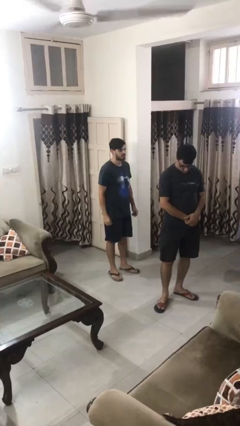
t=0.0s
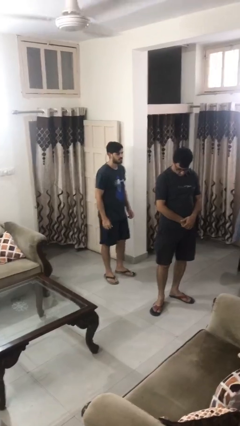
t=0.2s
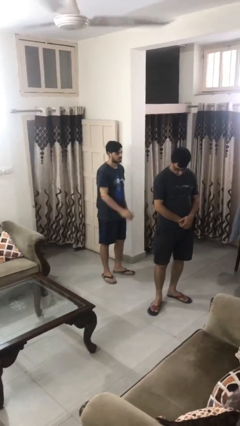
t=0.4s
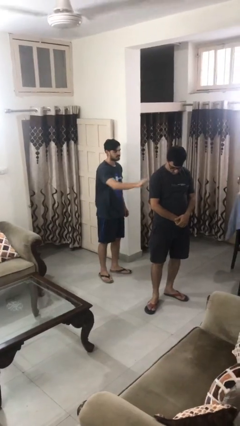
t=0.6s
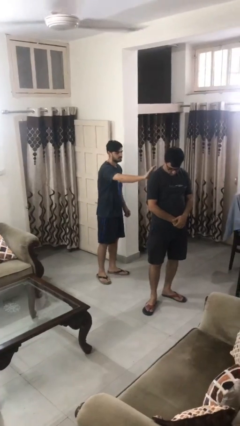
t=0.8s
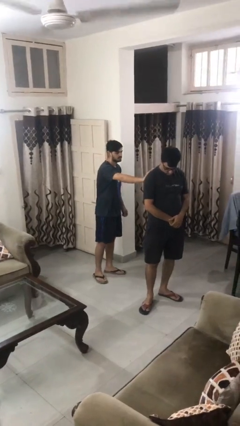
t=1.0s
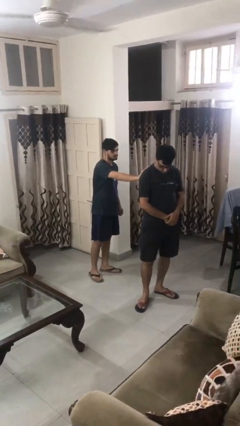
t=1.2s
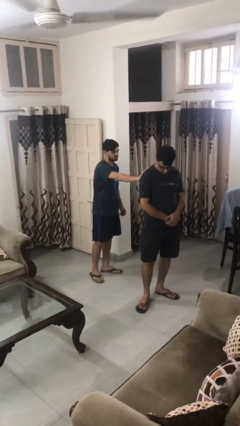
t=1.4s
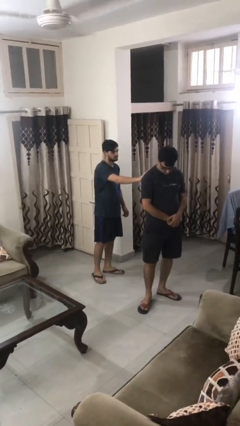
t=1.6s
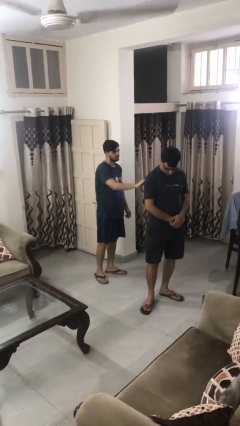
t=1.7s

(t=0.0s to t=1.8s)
person touches back of person

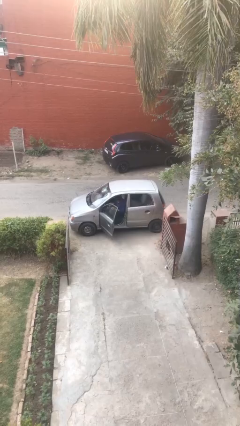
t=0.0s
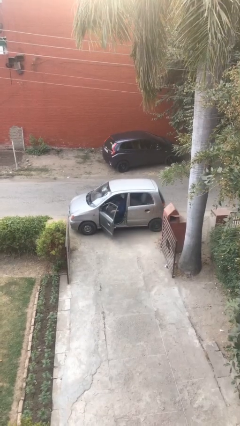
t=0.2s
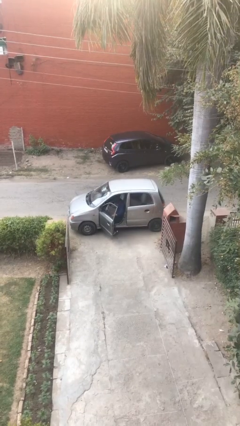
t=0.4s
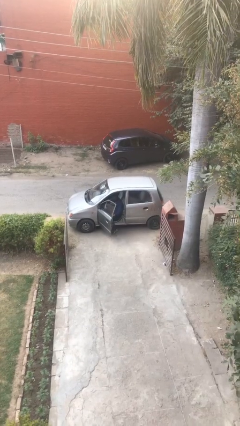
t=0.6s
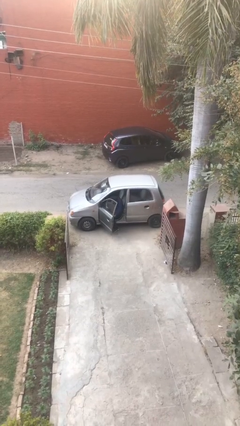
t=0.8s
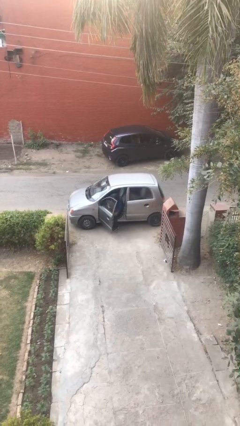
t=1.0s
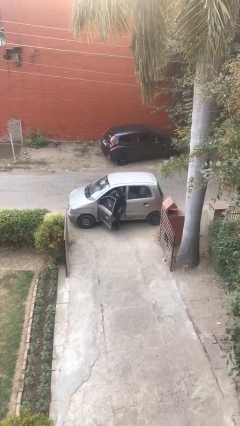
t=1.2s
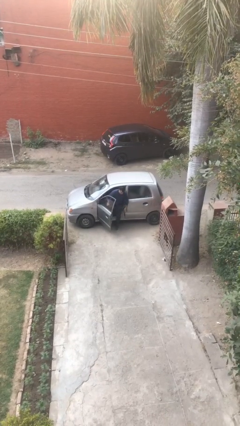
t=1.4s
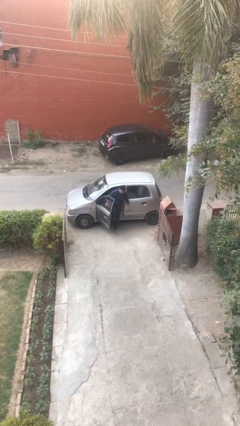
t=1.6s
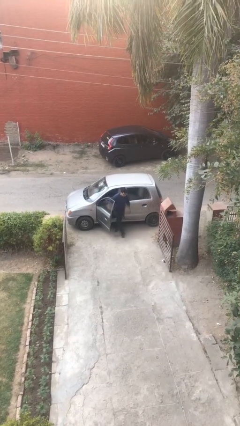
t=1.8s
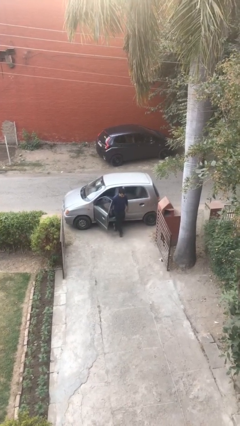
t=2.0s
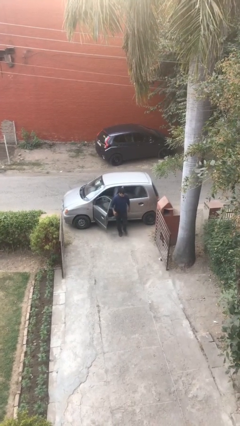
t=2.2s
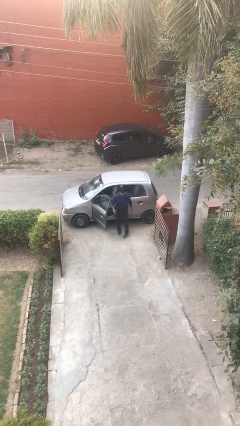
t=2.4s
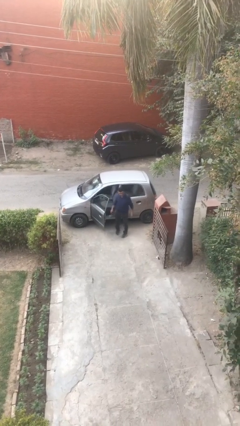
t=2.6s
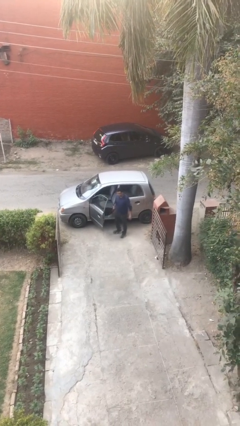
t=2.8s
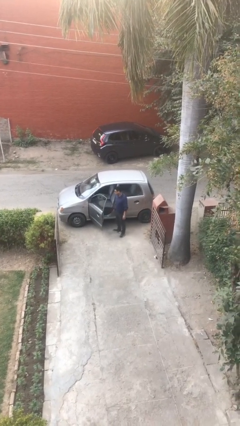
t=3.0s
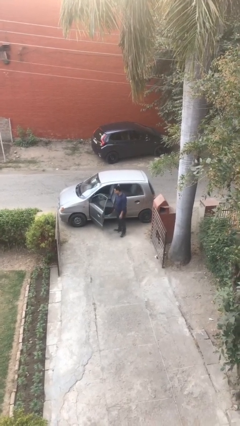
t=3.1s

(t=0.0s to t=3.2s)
person exits car

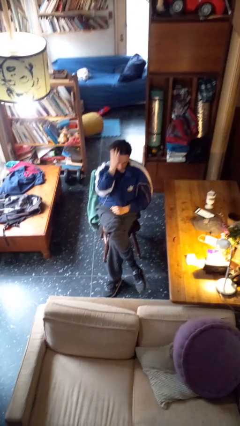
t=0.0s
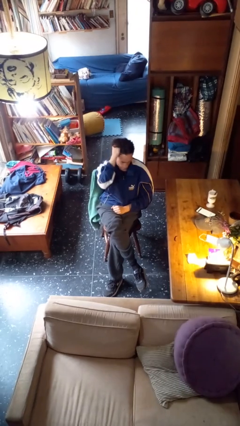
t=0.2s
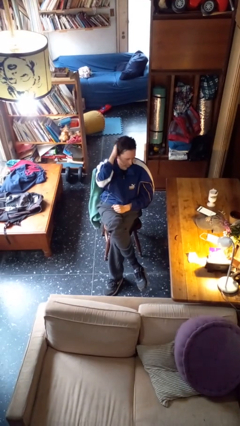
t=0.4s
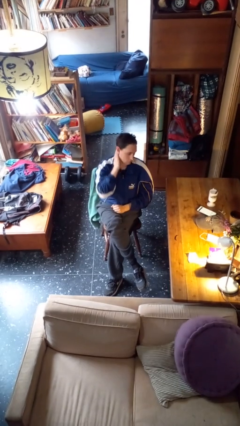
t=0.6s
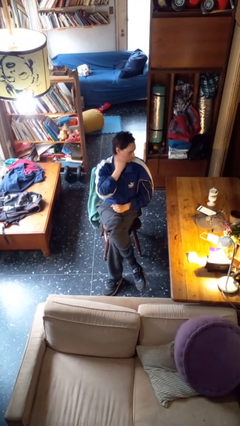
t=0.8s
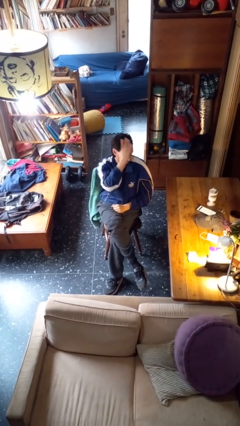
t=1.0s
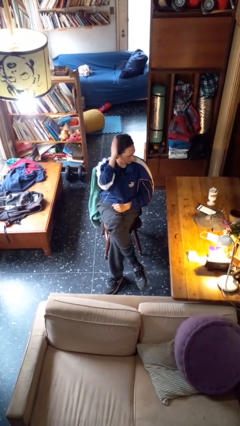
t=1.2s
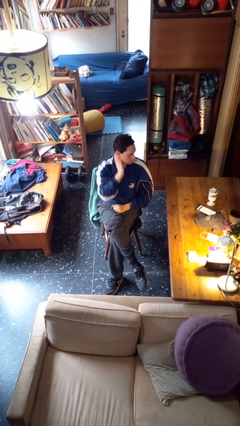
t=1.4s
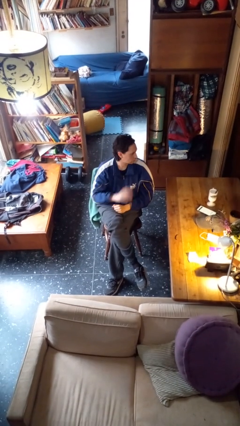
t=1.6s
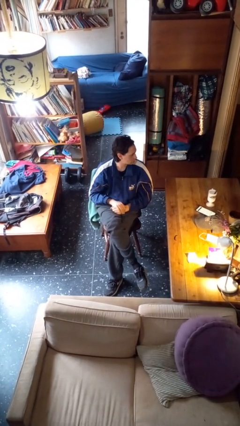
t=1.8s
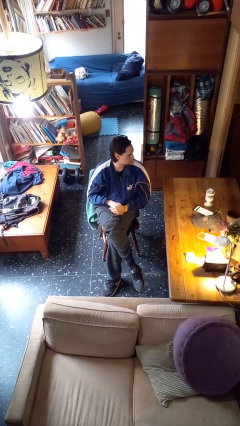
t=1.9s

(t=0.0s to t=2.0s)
person strokes hair

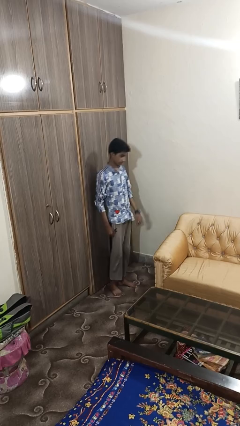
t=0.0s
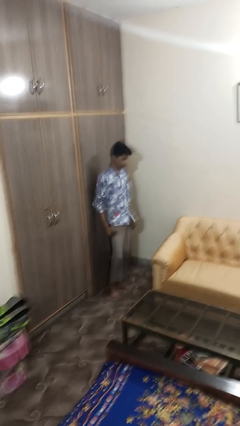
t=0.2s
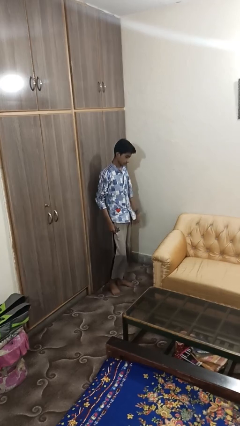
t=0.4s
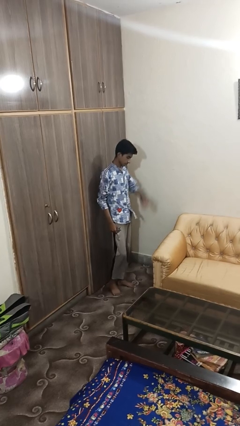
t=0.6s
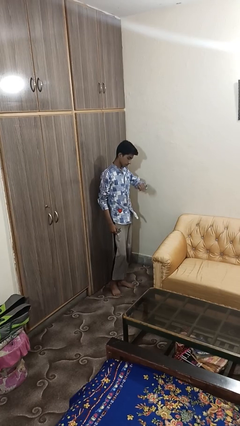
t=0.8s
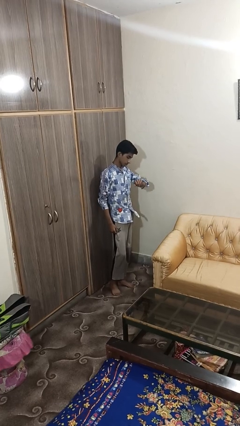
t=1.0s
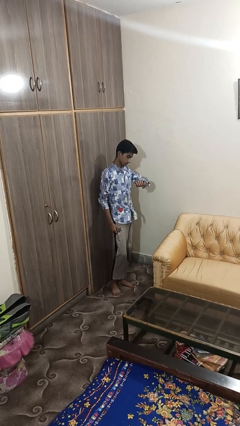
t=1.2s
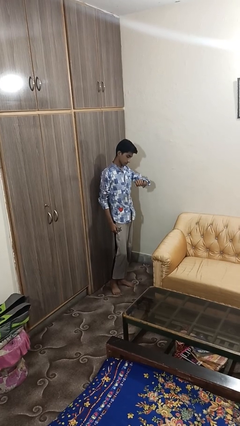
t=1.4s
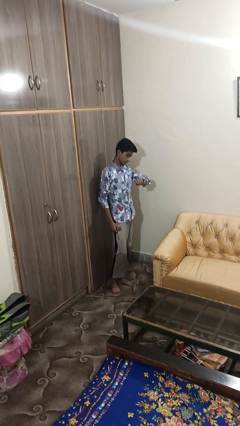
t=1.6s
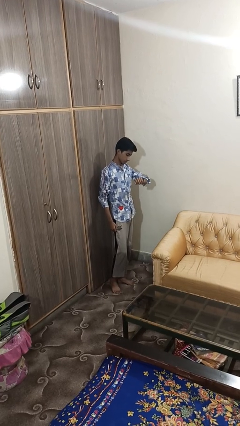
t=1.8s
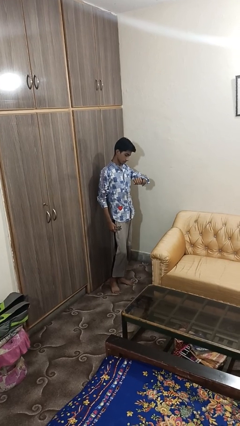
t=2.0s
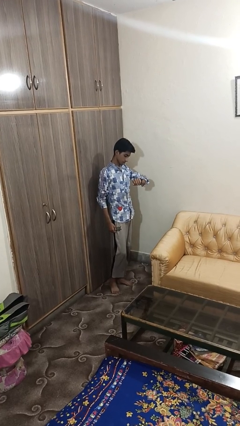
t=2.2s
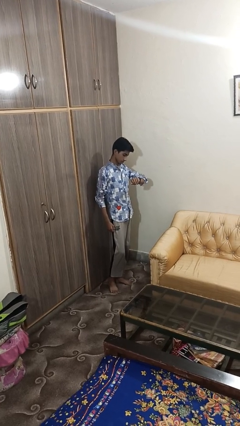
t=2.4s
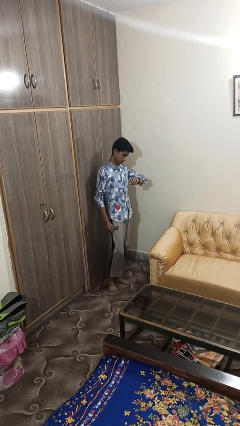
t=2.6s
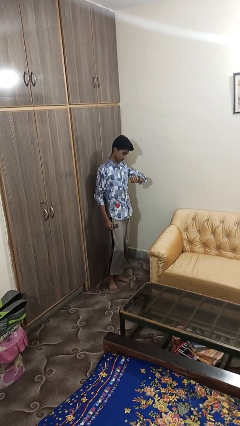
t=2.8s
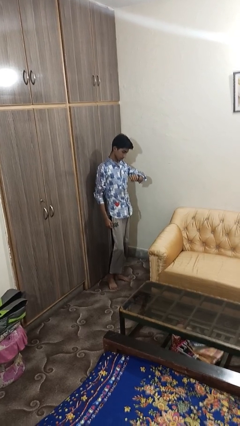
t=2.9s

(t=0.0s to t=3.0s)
person looks at wristwatch

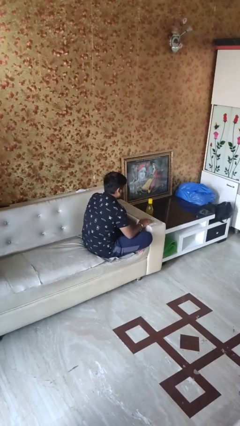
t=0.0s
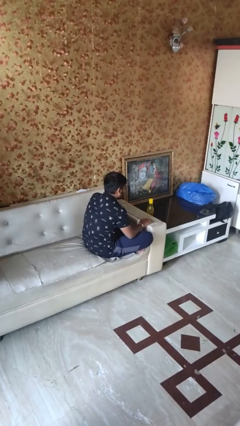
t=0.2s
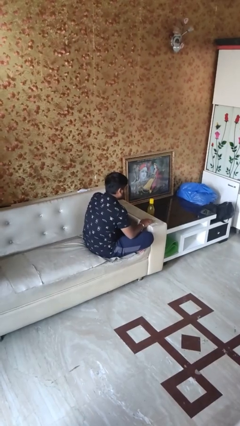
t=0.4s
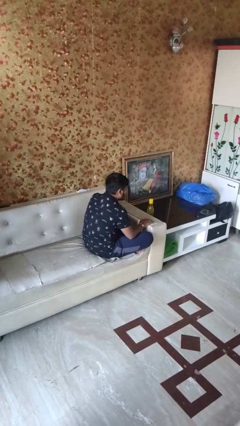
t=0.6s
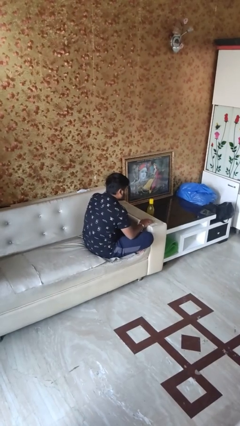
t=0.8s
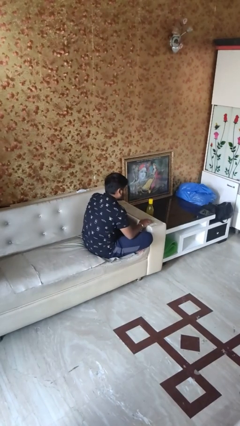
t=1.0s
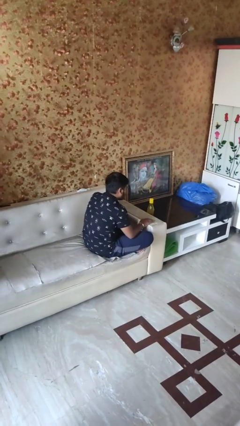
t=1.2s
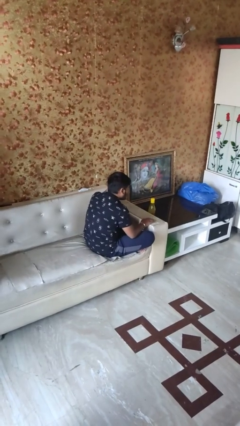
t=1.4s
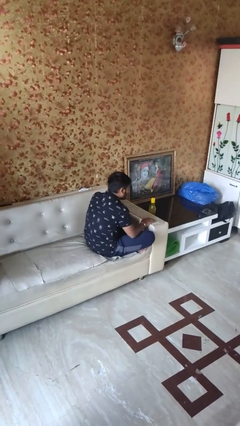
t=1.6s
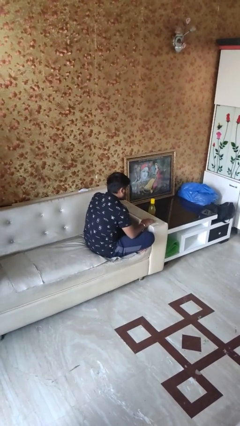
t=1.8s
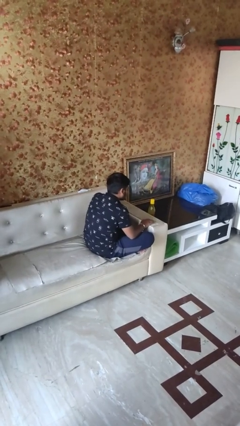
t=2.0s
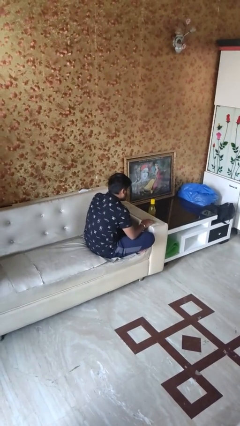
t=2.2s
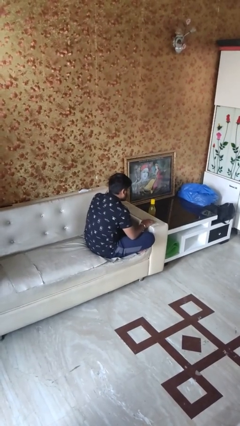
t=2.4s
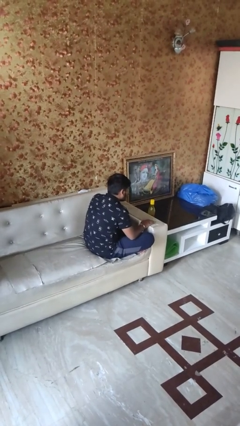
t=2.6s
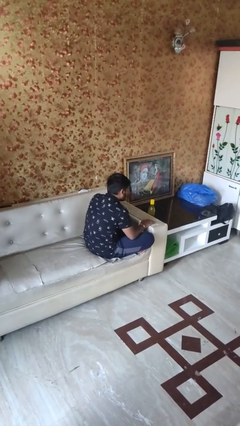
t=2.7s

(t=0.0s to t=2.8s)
person rubs eyes

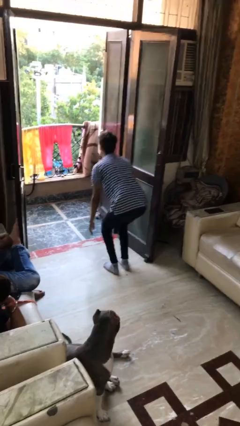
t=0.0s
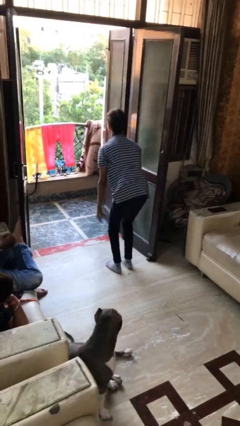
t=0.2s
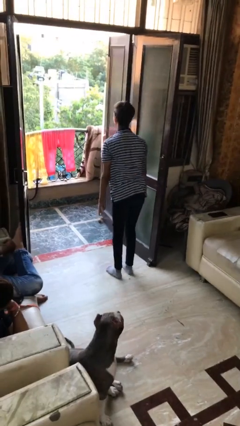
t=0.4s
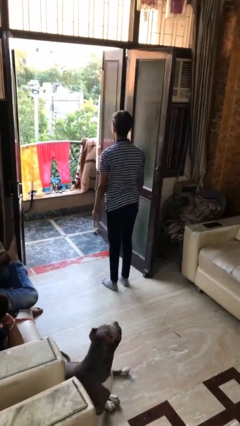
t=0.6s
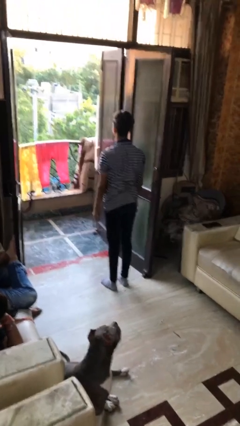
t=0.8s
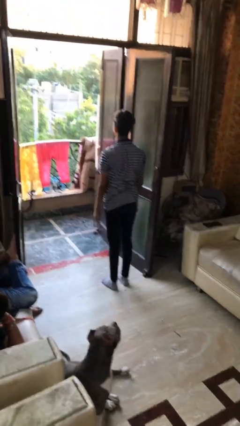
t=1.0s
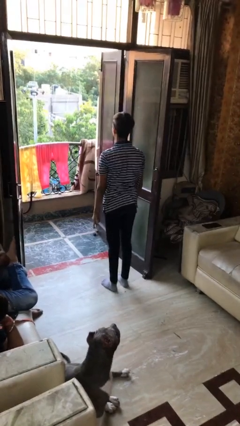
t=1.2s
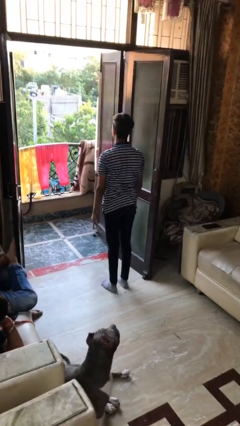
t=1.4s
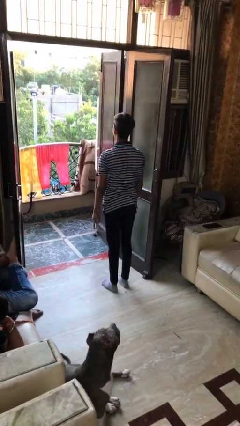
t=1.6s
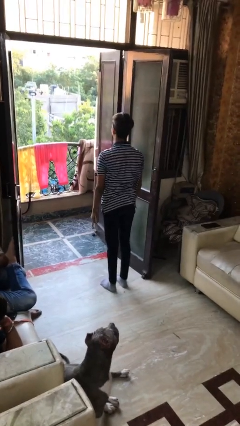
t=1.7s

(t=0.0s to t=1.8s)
person stands up from floor

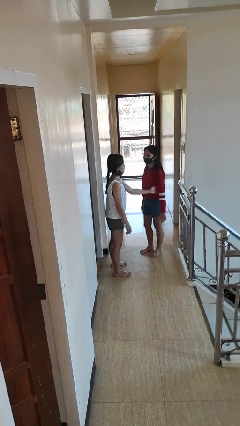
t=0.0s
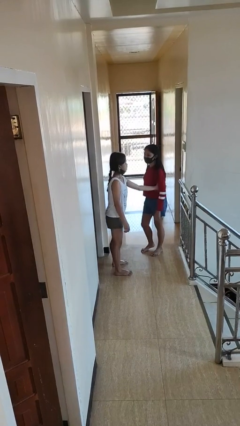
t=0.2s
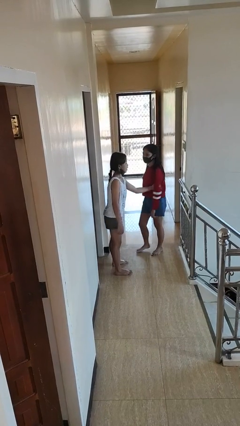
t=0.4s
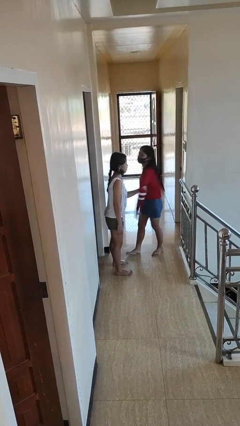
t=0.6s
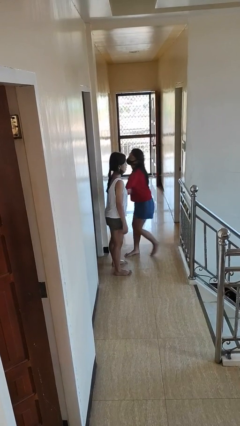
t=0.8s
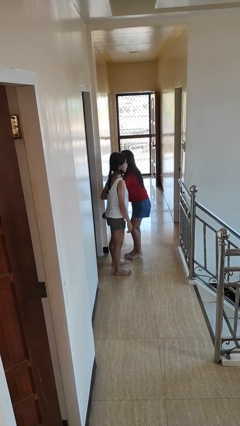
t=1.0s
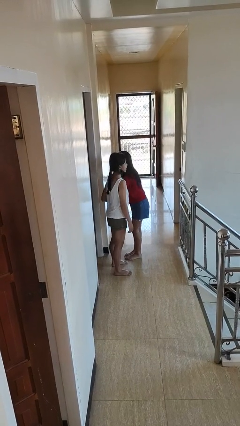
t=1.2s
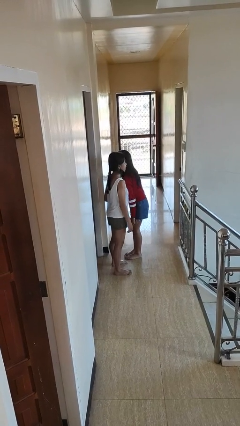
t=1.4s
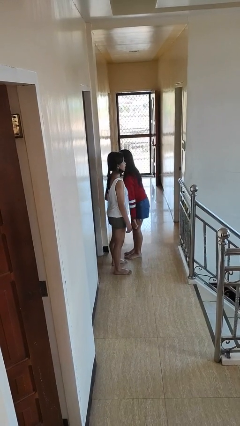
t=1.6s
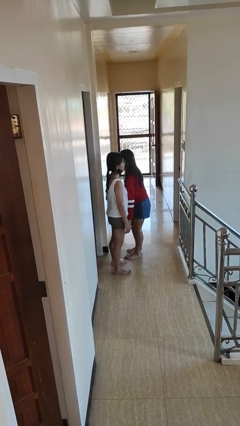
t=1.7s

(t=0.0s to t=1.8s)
person grabs person by bicep

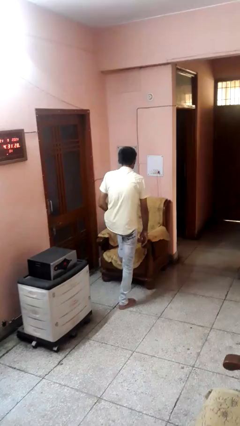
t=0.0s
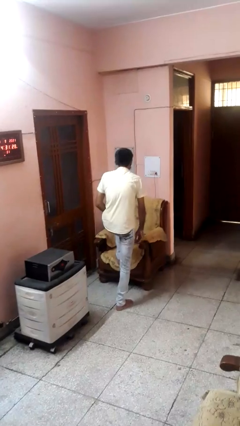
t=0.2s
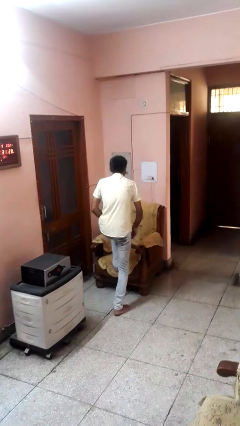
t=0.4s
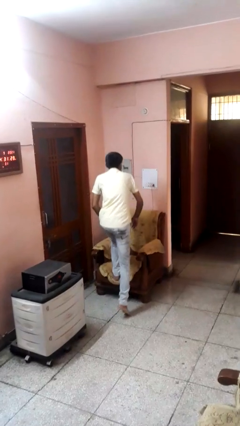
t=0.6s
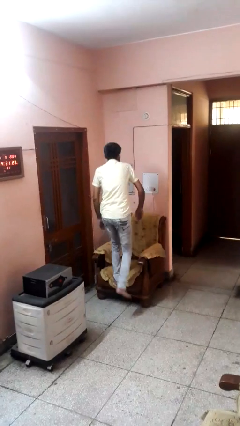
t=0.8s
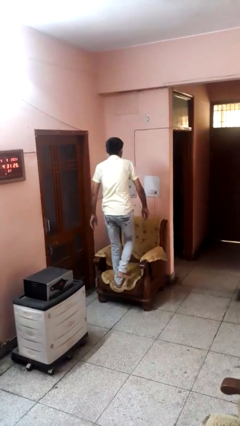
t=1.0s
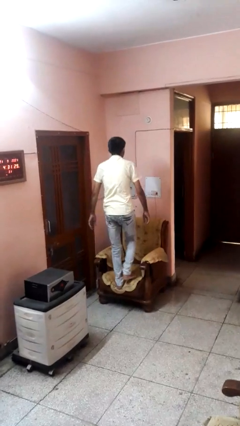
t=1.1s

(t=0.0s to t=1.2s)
person climbs on couch
